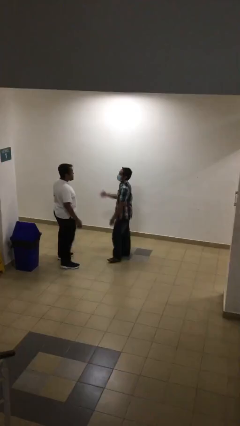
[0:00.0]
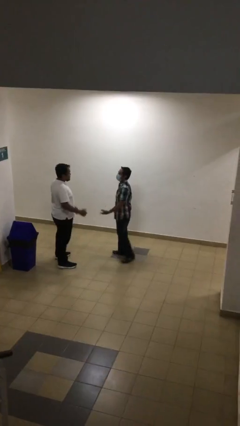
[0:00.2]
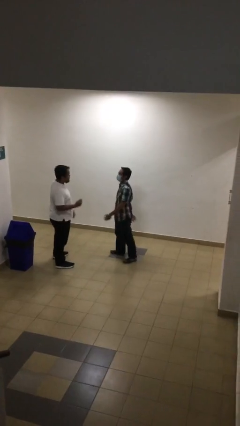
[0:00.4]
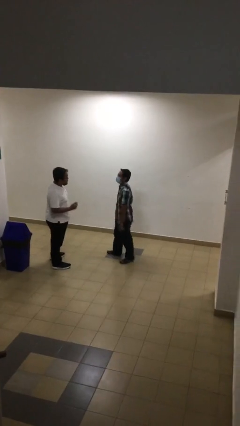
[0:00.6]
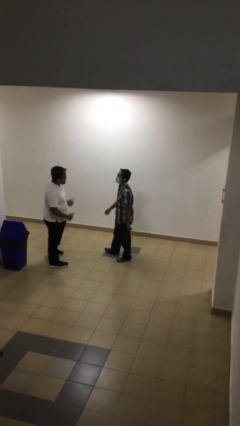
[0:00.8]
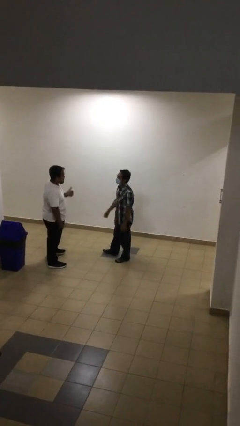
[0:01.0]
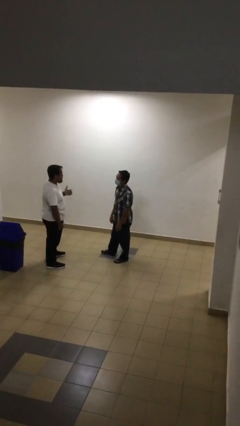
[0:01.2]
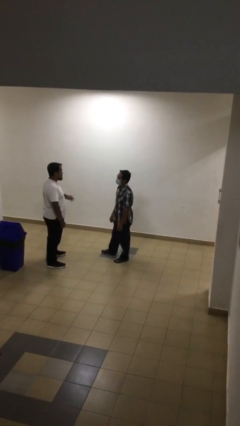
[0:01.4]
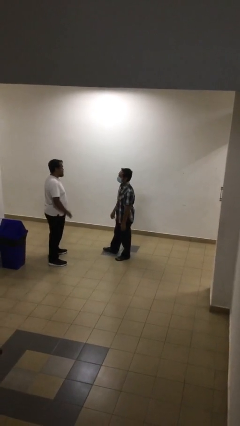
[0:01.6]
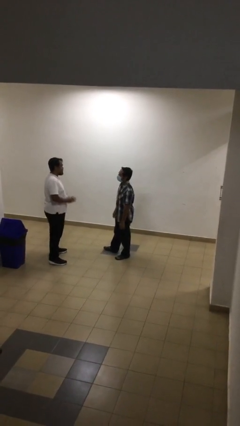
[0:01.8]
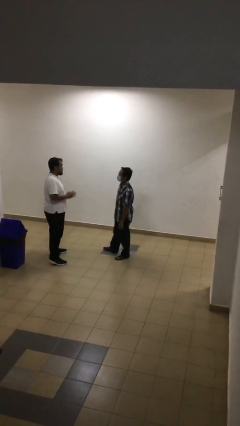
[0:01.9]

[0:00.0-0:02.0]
person talks to person

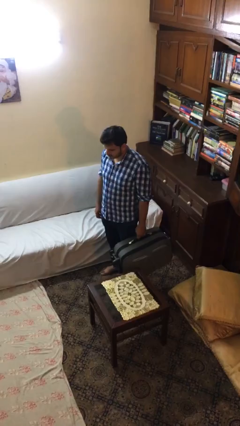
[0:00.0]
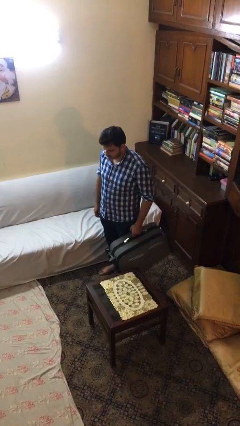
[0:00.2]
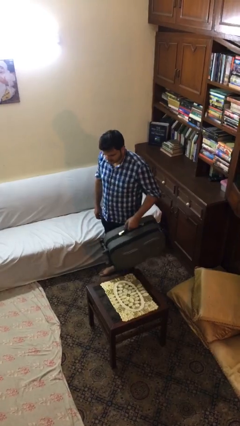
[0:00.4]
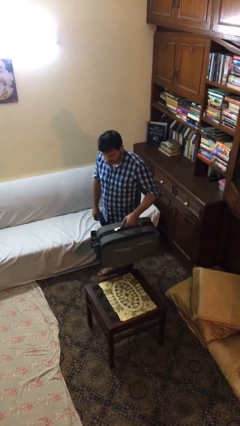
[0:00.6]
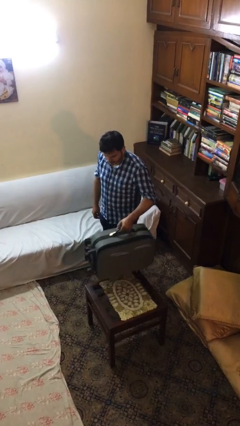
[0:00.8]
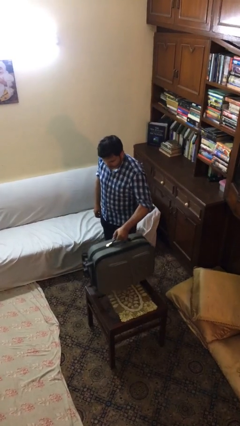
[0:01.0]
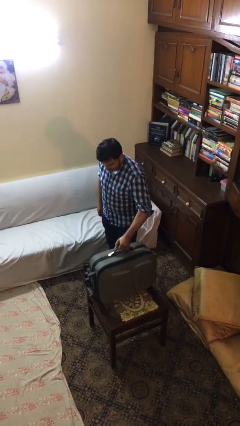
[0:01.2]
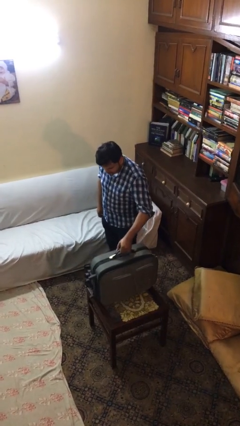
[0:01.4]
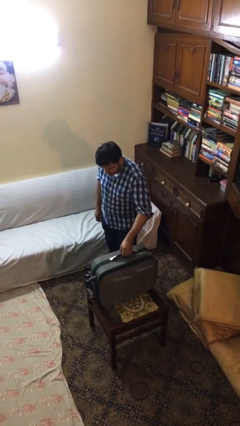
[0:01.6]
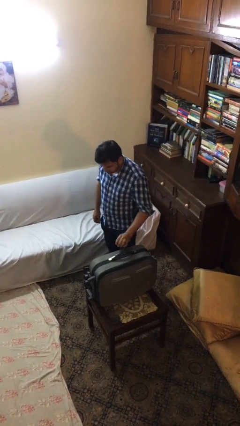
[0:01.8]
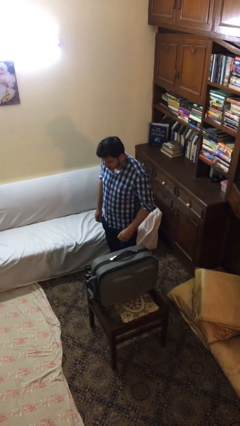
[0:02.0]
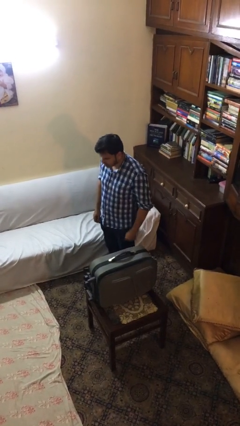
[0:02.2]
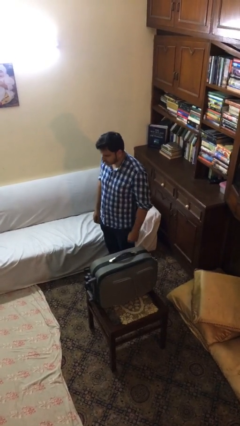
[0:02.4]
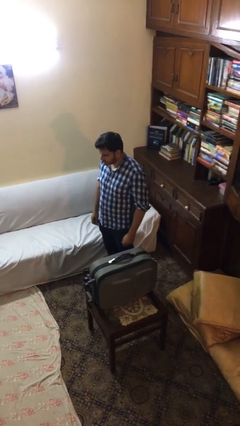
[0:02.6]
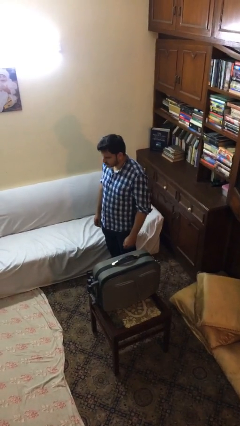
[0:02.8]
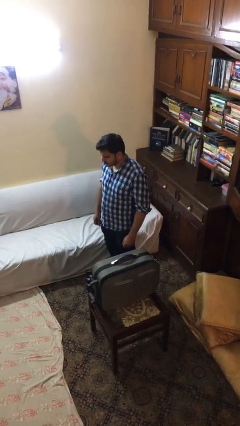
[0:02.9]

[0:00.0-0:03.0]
person puts down object on table

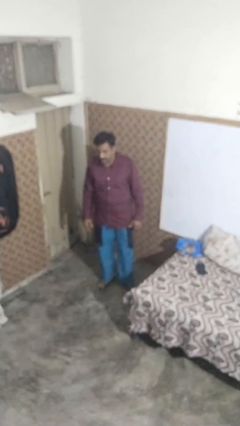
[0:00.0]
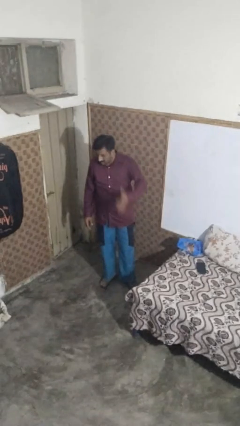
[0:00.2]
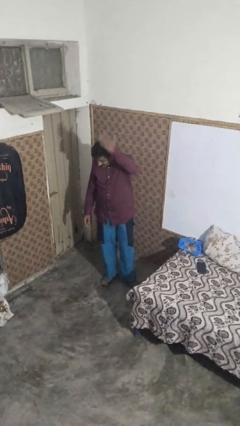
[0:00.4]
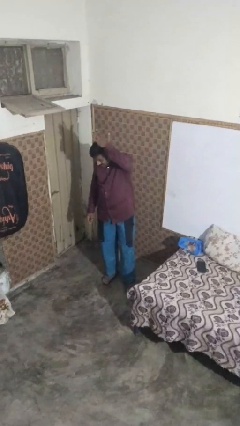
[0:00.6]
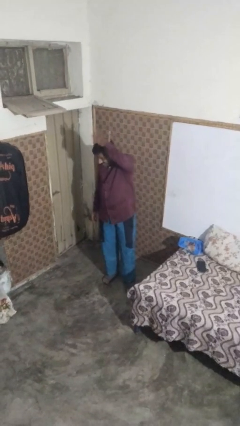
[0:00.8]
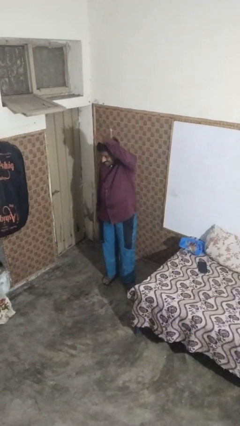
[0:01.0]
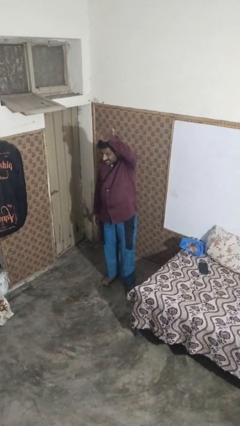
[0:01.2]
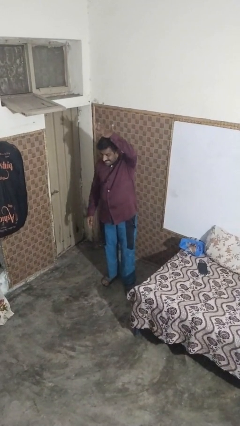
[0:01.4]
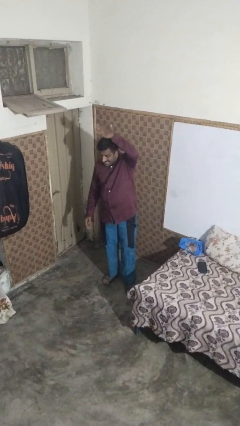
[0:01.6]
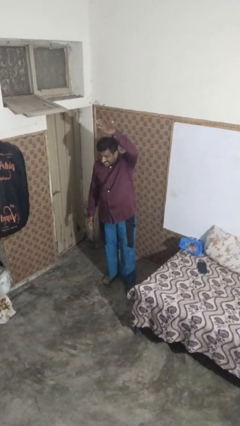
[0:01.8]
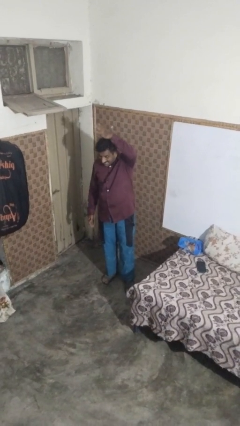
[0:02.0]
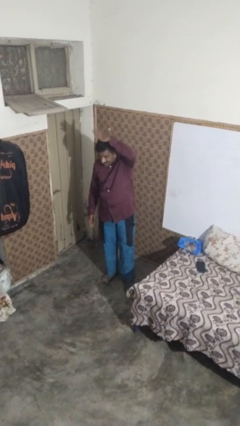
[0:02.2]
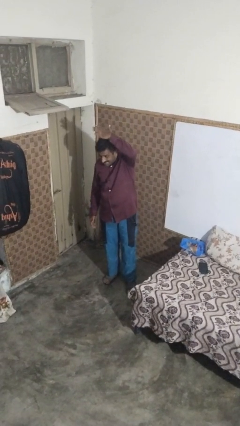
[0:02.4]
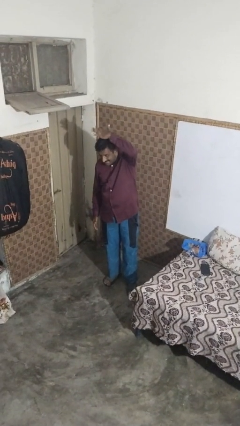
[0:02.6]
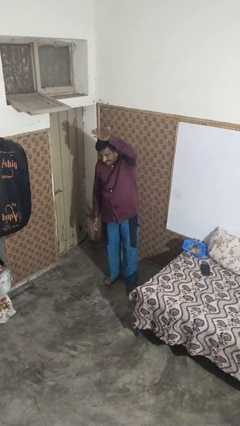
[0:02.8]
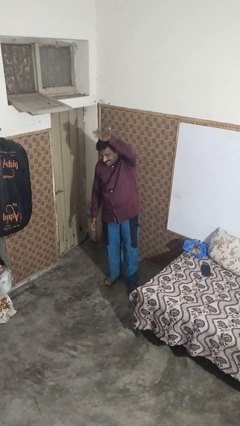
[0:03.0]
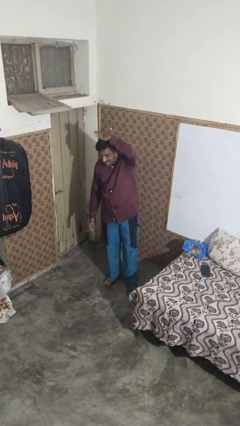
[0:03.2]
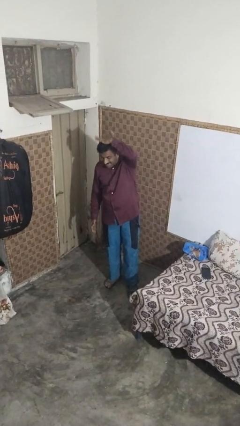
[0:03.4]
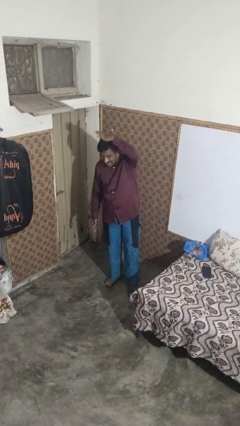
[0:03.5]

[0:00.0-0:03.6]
person pats head

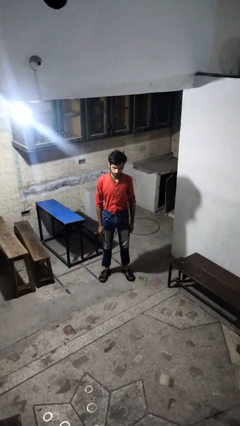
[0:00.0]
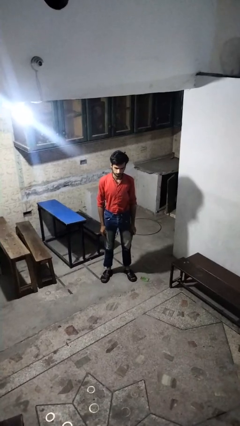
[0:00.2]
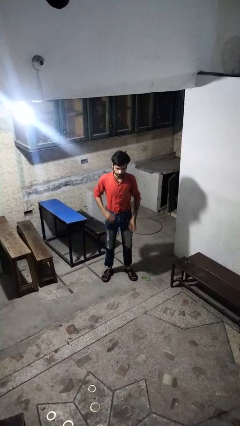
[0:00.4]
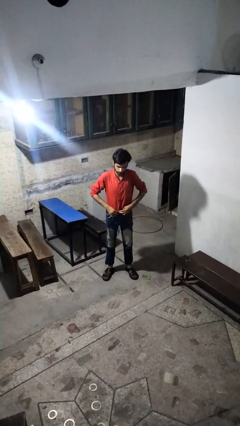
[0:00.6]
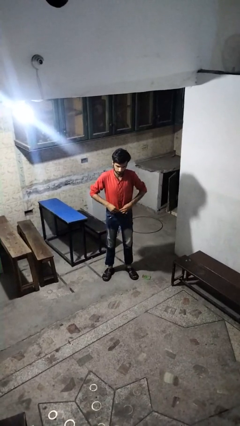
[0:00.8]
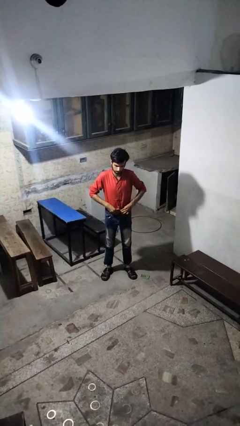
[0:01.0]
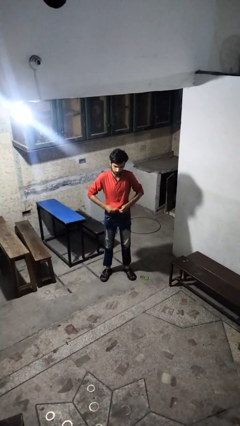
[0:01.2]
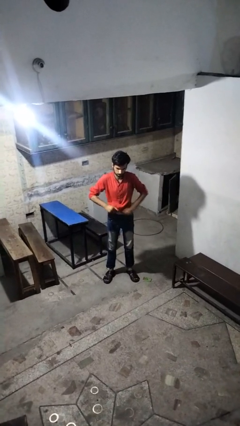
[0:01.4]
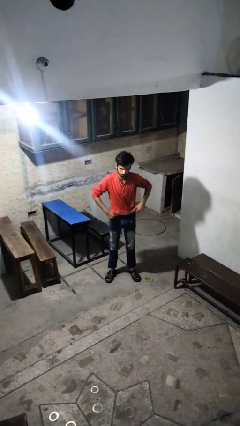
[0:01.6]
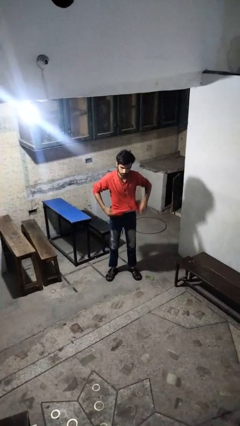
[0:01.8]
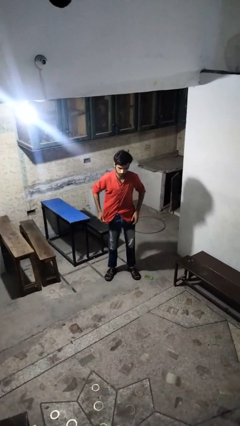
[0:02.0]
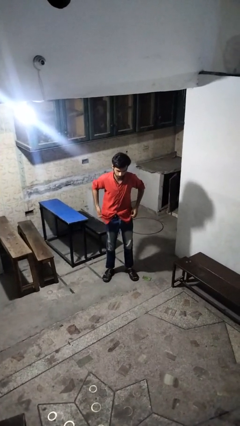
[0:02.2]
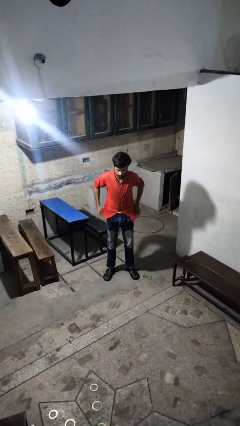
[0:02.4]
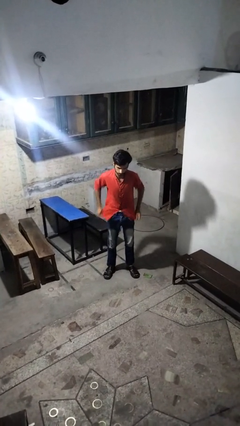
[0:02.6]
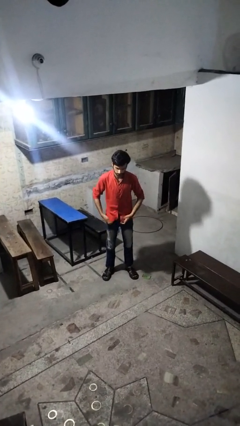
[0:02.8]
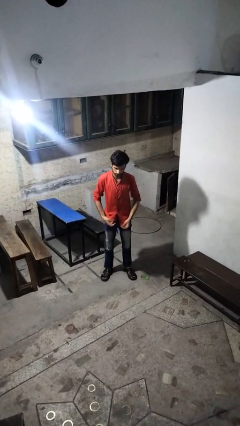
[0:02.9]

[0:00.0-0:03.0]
person untucks shirt

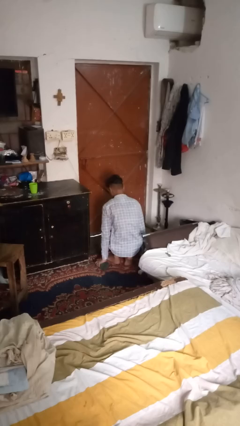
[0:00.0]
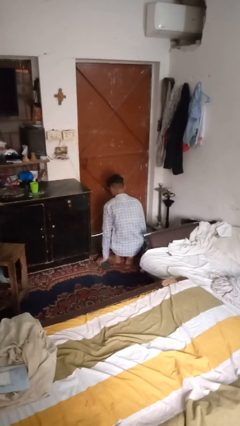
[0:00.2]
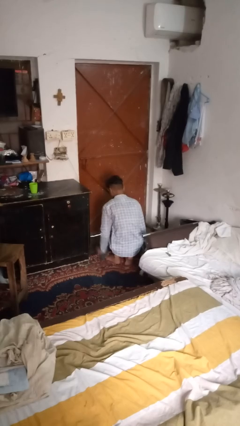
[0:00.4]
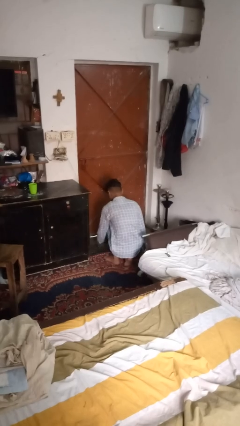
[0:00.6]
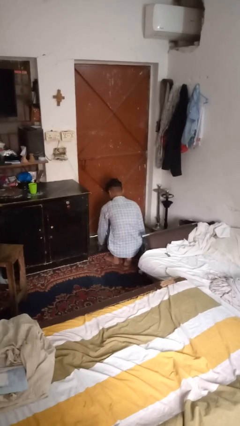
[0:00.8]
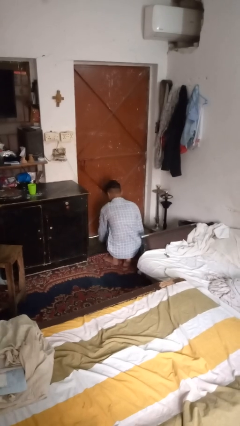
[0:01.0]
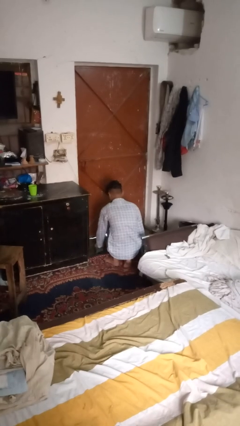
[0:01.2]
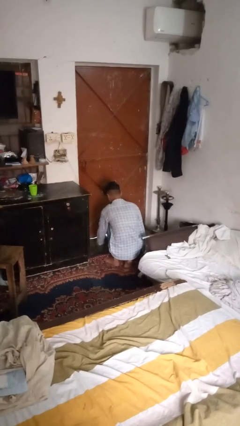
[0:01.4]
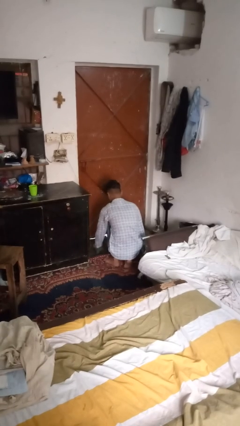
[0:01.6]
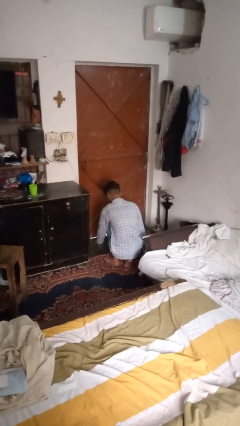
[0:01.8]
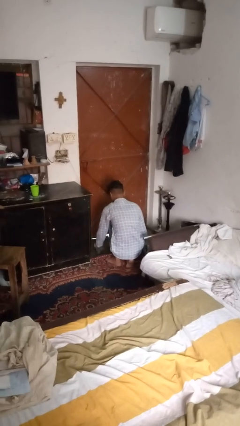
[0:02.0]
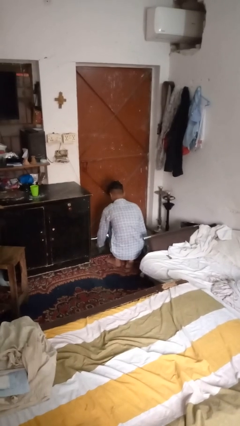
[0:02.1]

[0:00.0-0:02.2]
person mops

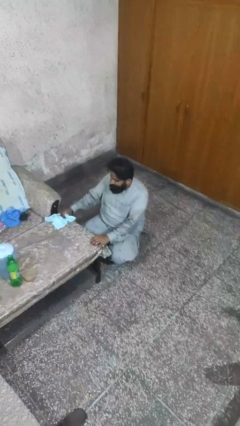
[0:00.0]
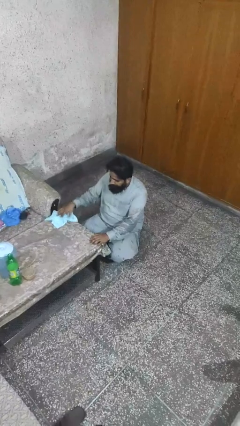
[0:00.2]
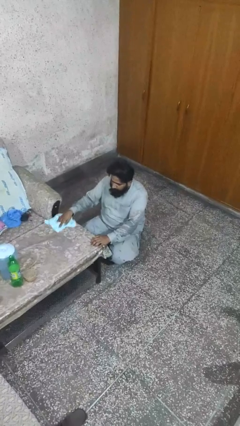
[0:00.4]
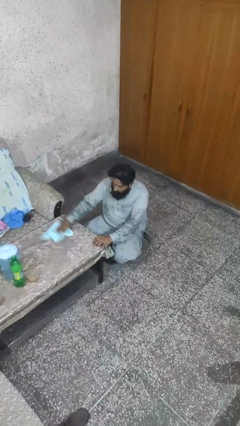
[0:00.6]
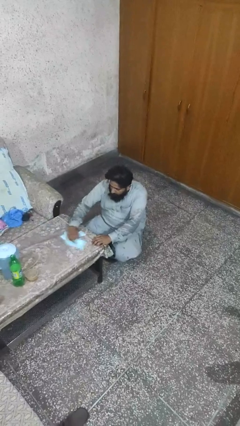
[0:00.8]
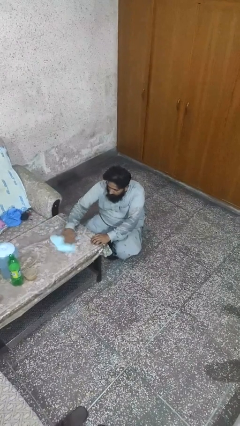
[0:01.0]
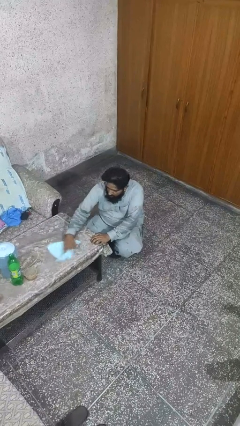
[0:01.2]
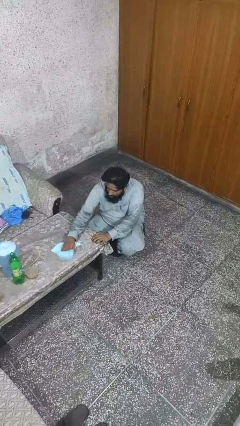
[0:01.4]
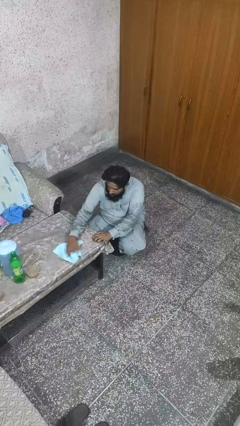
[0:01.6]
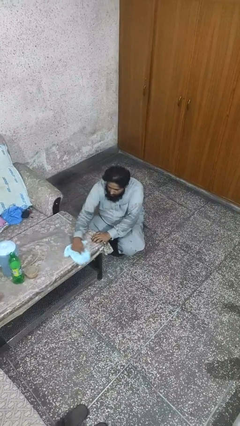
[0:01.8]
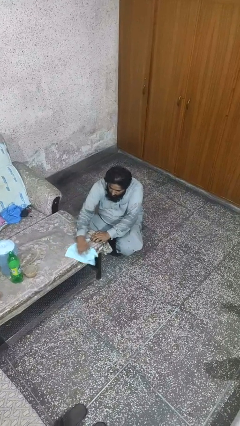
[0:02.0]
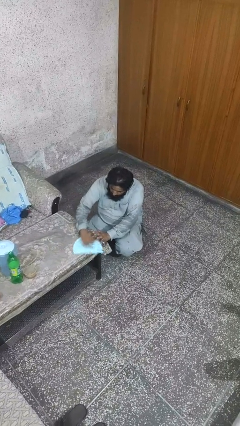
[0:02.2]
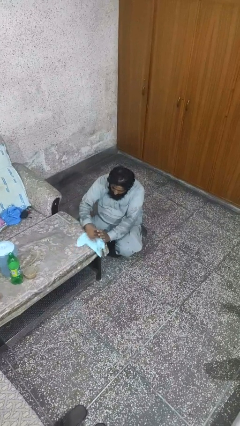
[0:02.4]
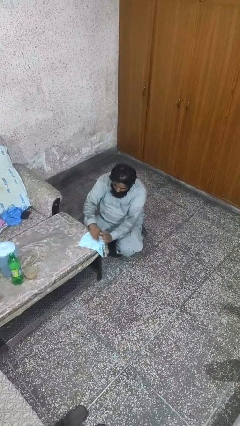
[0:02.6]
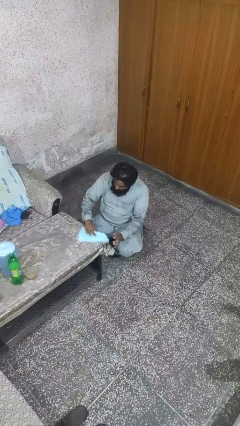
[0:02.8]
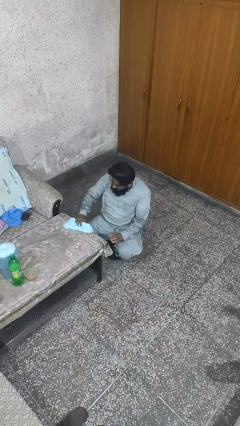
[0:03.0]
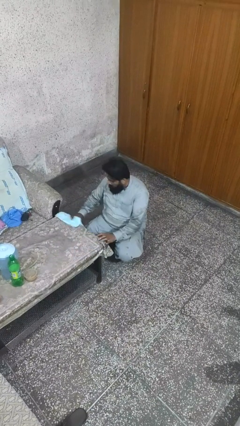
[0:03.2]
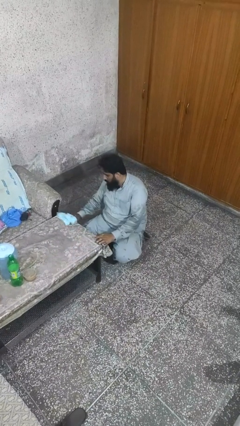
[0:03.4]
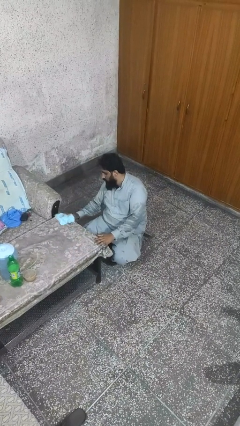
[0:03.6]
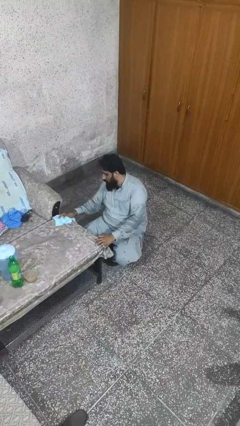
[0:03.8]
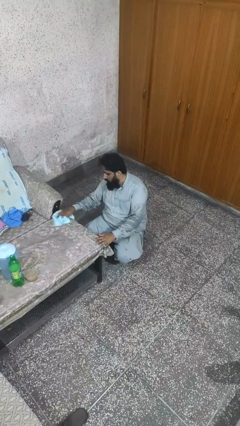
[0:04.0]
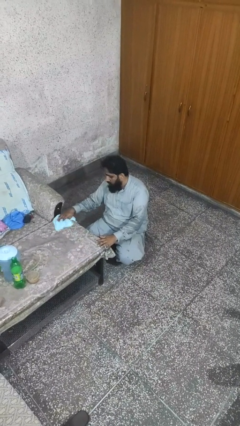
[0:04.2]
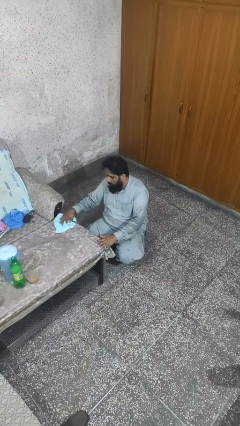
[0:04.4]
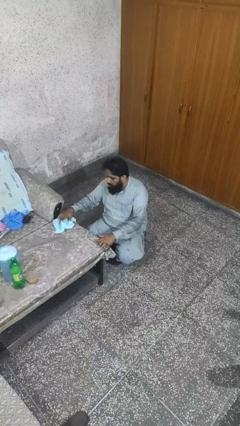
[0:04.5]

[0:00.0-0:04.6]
person cleans table with rag
